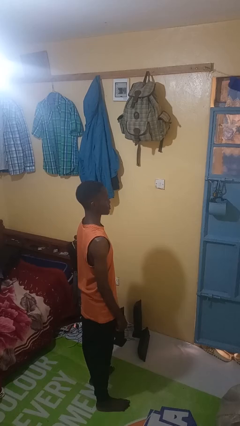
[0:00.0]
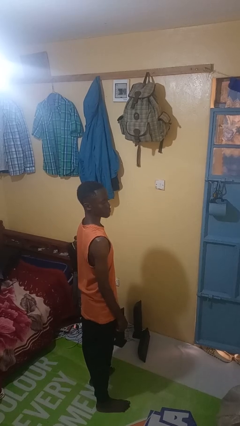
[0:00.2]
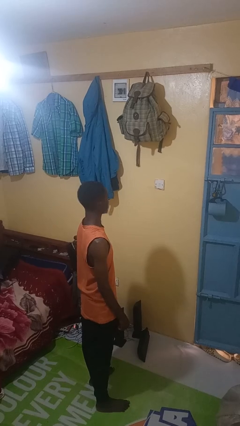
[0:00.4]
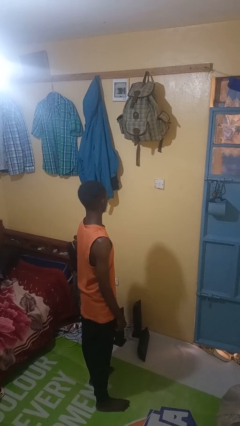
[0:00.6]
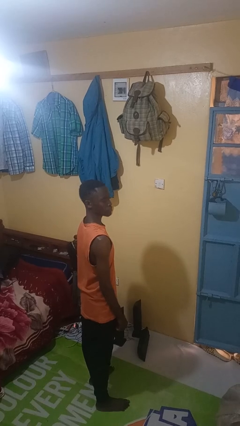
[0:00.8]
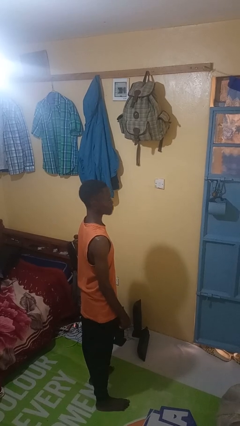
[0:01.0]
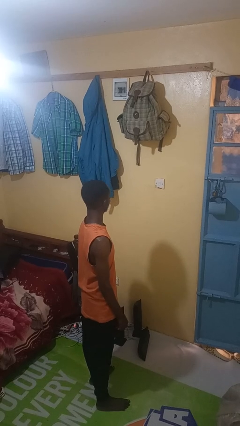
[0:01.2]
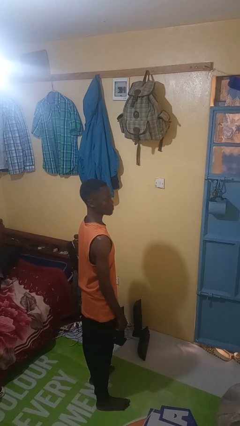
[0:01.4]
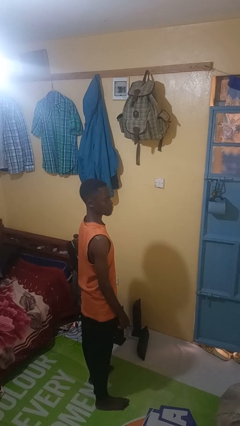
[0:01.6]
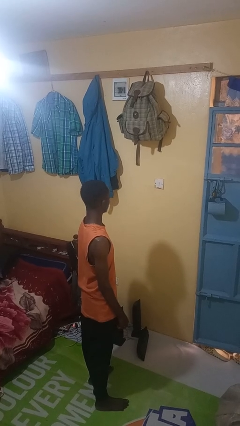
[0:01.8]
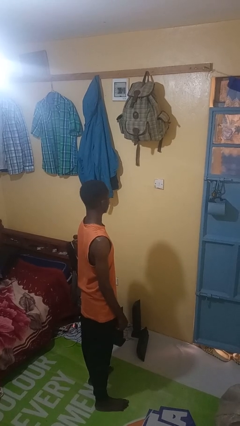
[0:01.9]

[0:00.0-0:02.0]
person shakes head

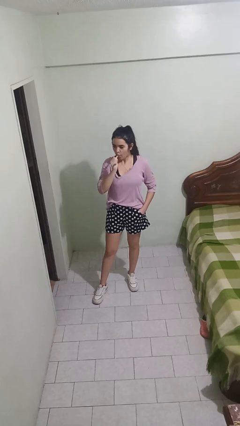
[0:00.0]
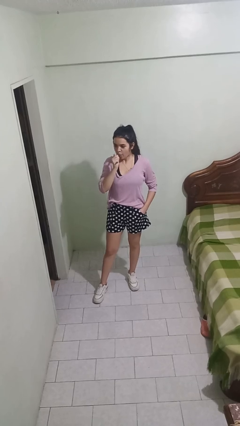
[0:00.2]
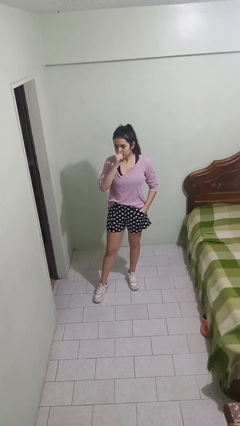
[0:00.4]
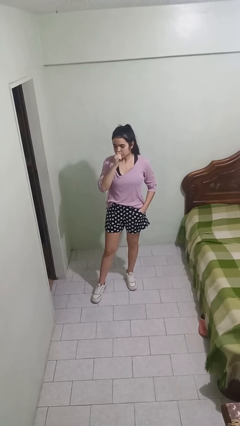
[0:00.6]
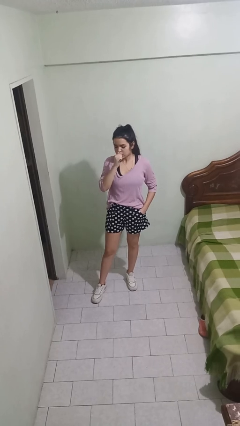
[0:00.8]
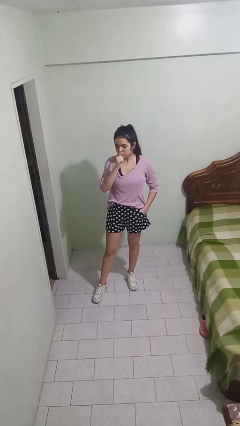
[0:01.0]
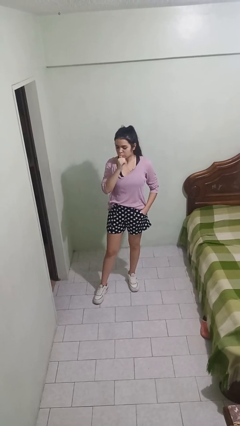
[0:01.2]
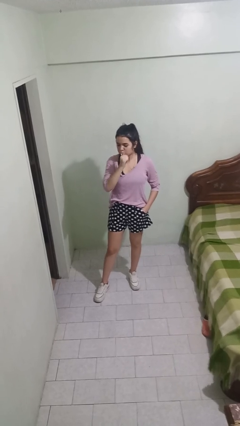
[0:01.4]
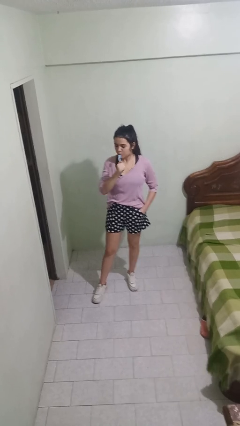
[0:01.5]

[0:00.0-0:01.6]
person brushes teeth

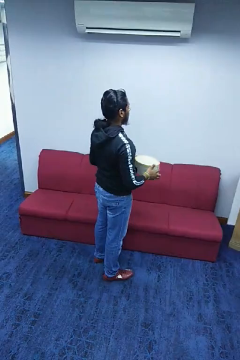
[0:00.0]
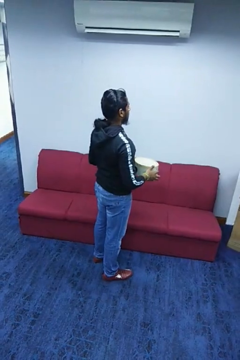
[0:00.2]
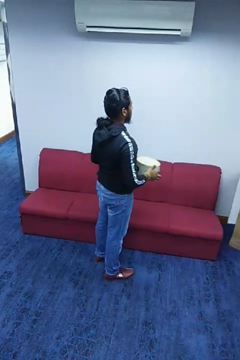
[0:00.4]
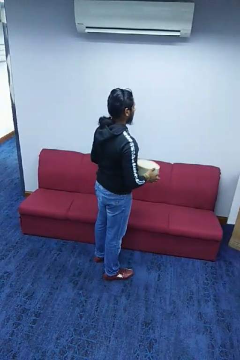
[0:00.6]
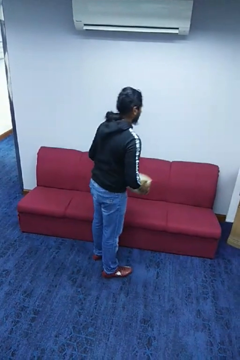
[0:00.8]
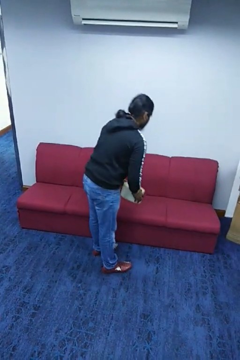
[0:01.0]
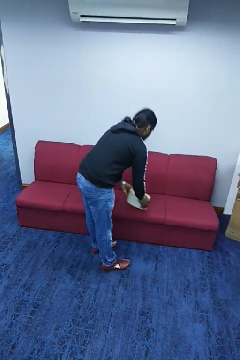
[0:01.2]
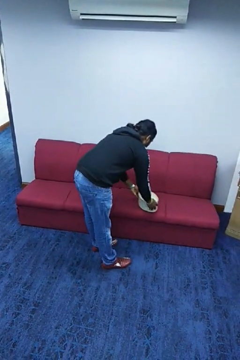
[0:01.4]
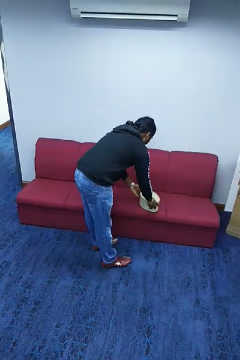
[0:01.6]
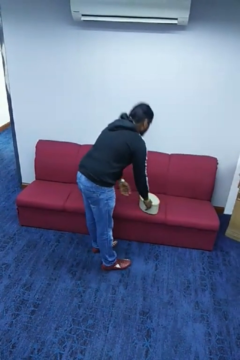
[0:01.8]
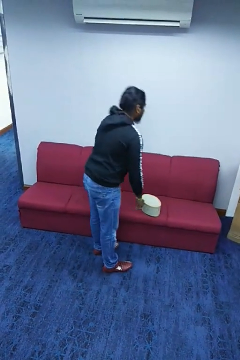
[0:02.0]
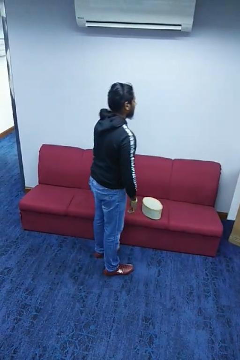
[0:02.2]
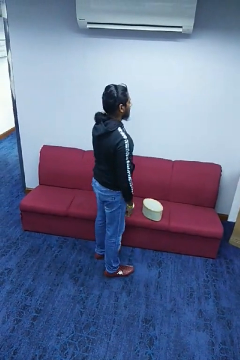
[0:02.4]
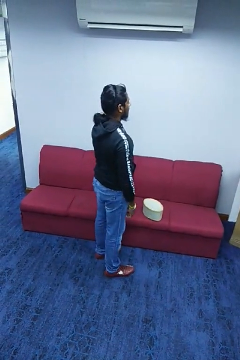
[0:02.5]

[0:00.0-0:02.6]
person puts down object on couch

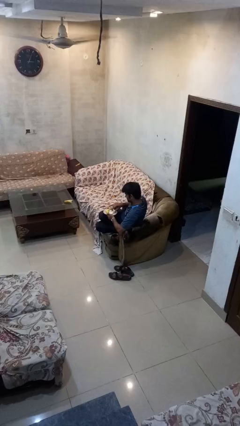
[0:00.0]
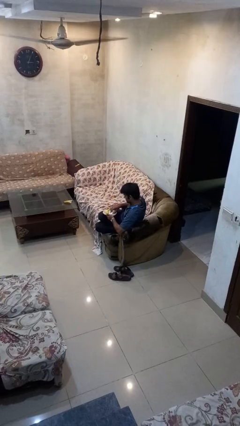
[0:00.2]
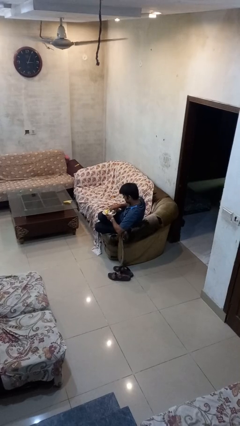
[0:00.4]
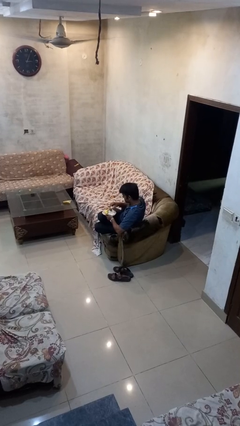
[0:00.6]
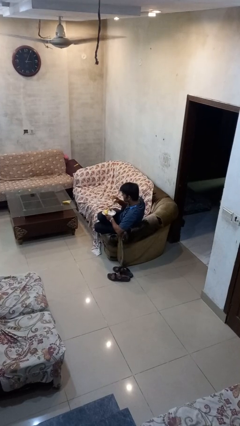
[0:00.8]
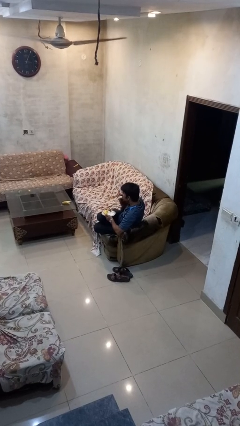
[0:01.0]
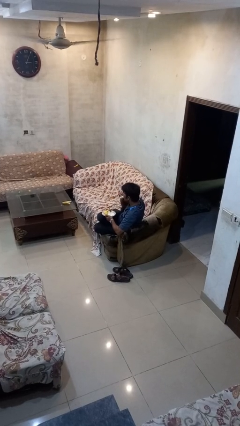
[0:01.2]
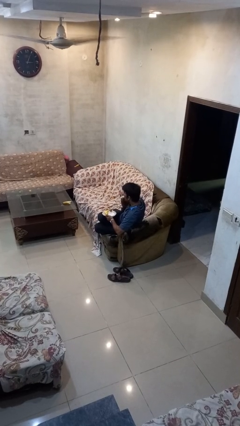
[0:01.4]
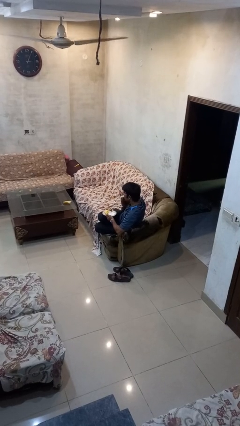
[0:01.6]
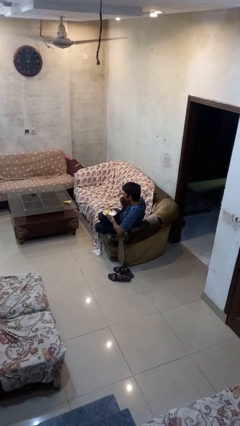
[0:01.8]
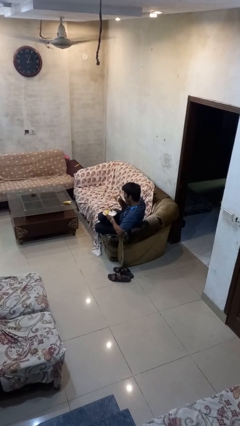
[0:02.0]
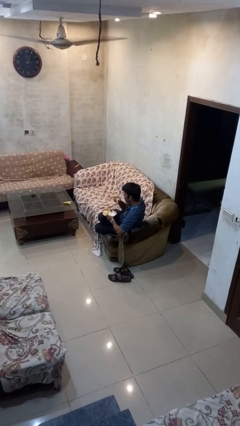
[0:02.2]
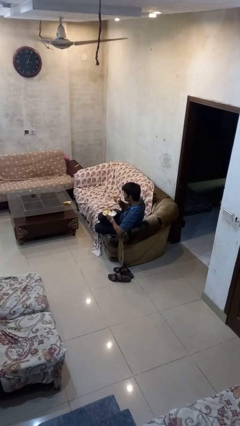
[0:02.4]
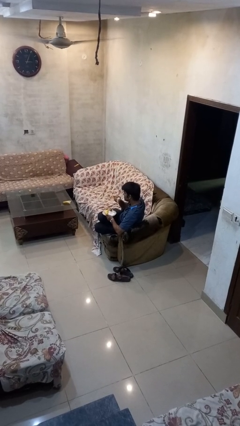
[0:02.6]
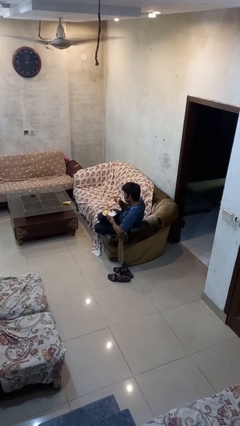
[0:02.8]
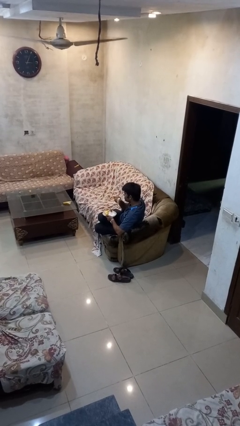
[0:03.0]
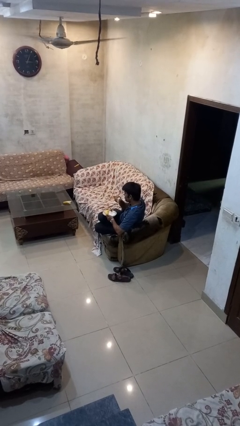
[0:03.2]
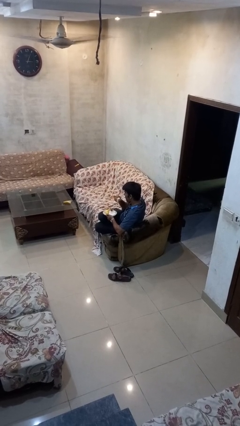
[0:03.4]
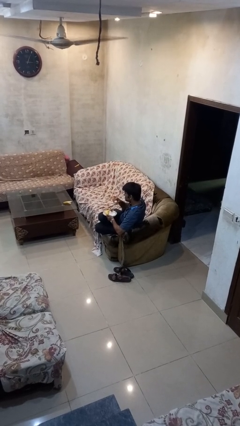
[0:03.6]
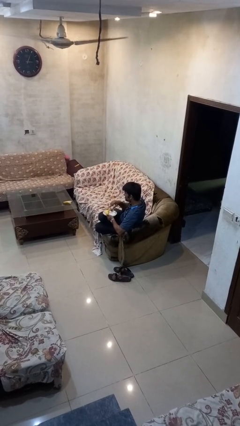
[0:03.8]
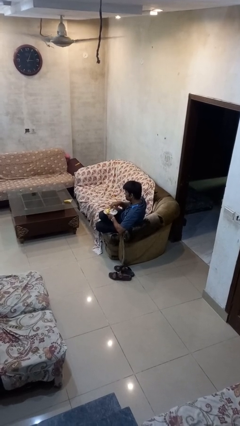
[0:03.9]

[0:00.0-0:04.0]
person eats with hands

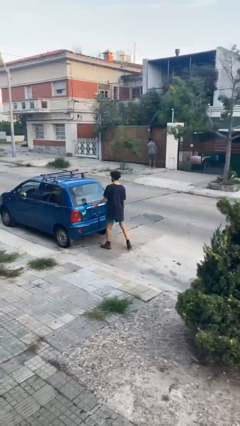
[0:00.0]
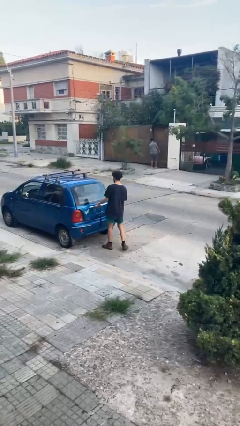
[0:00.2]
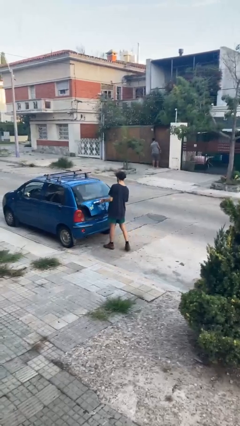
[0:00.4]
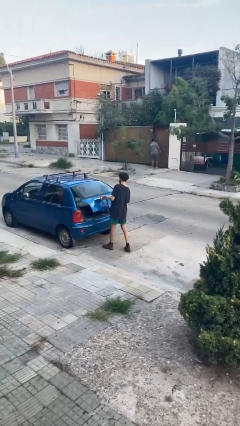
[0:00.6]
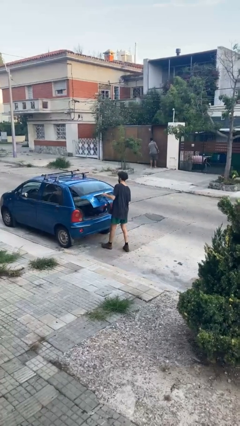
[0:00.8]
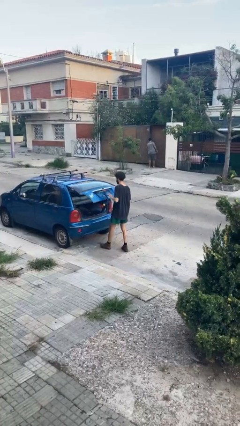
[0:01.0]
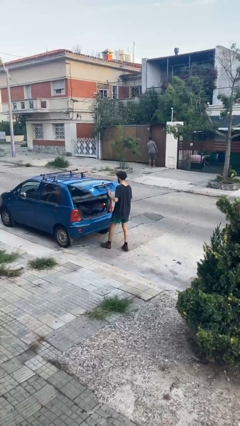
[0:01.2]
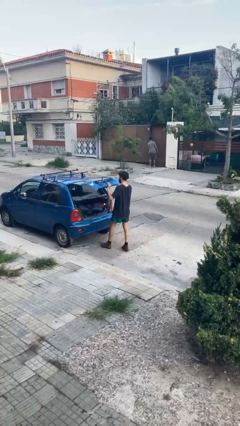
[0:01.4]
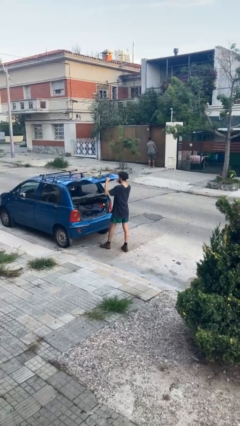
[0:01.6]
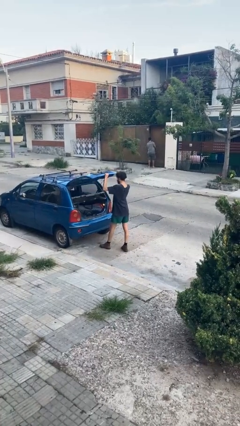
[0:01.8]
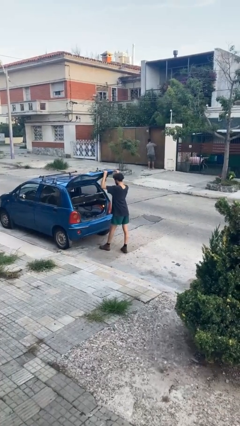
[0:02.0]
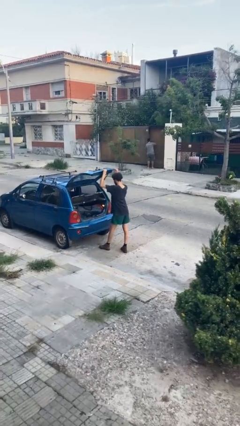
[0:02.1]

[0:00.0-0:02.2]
person opens car trunk

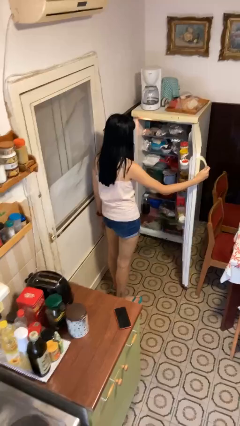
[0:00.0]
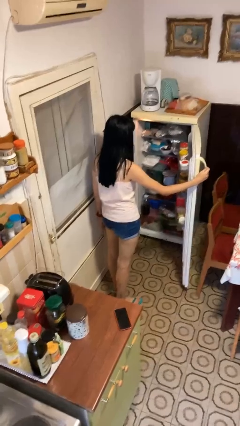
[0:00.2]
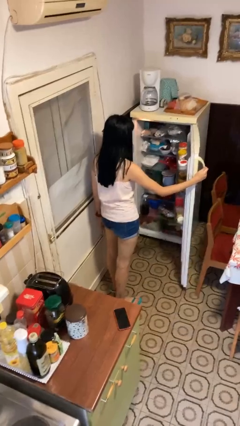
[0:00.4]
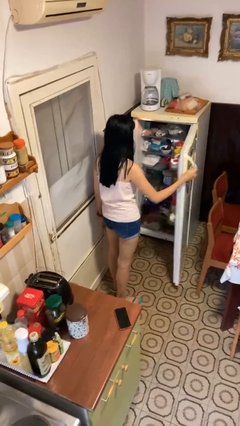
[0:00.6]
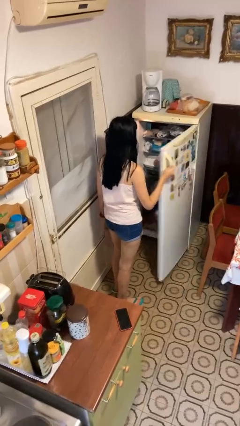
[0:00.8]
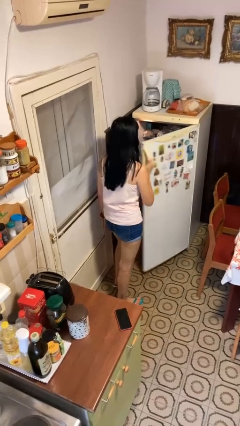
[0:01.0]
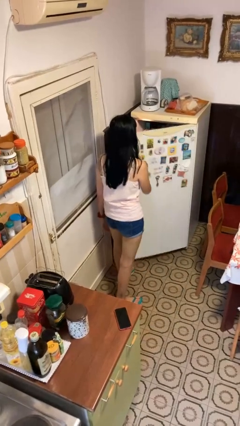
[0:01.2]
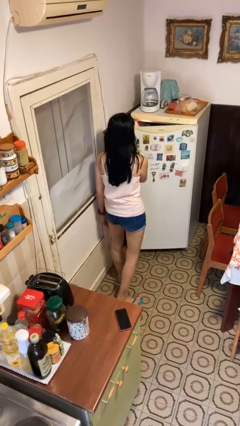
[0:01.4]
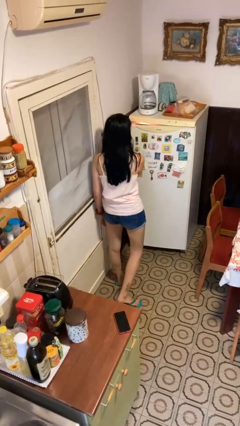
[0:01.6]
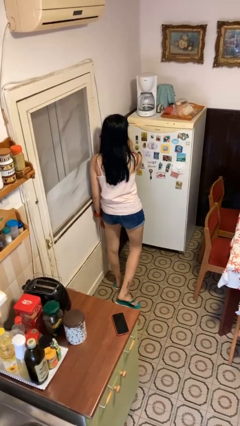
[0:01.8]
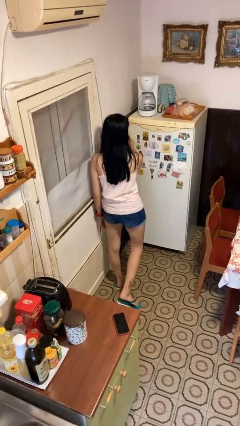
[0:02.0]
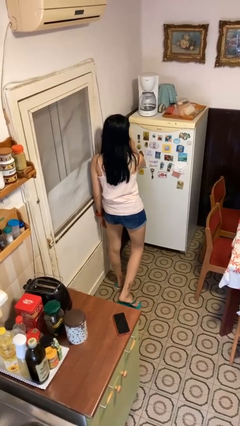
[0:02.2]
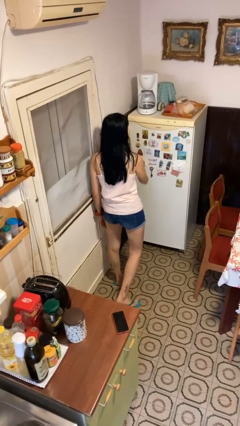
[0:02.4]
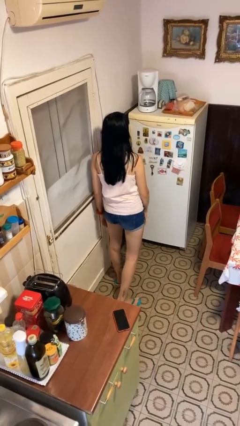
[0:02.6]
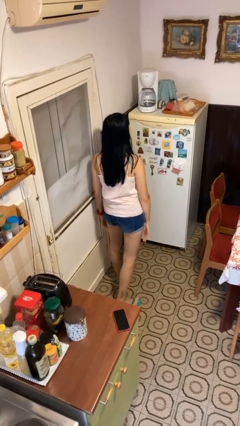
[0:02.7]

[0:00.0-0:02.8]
person closes refrigerator

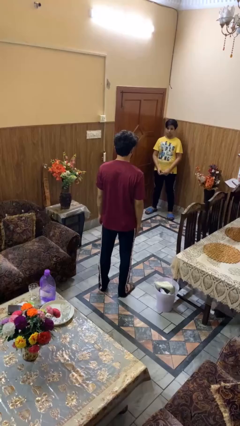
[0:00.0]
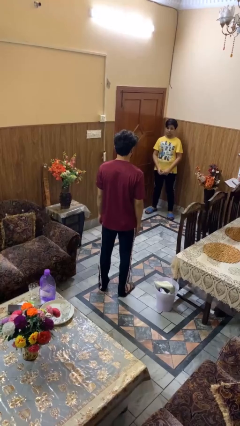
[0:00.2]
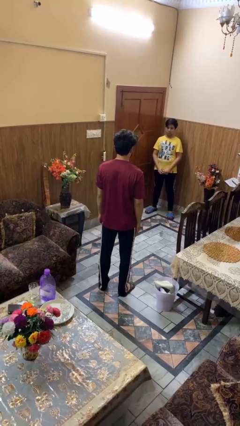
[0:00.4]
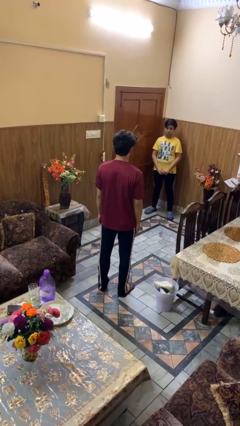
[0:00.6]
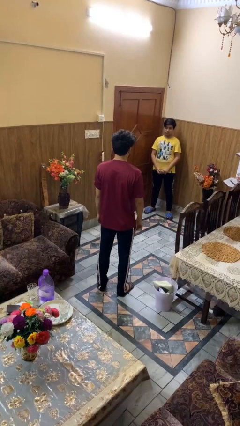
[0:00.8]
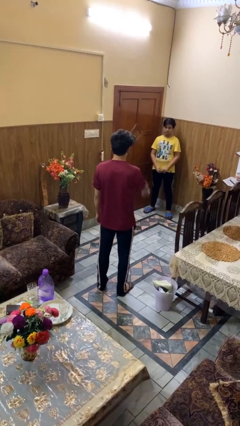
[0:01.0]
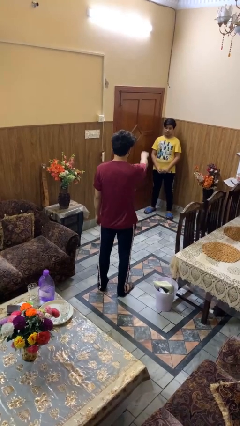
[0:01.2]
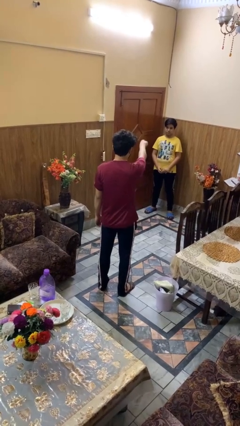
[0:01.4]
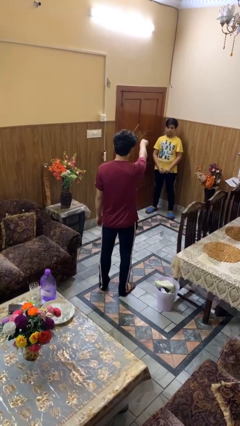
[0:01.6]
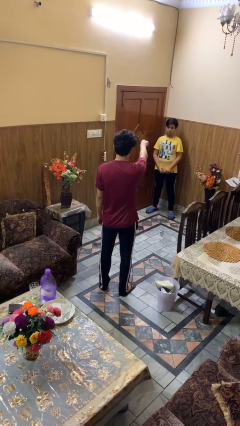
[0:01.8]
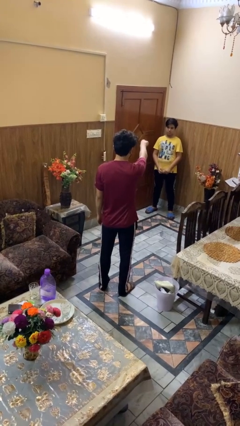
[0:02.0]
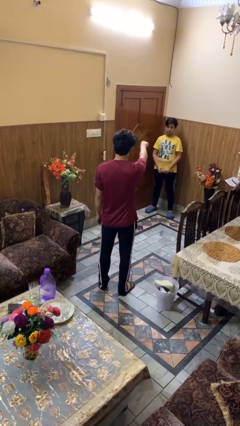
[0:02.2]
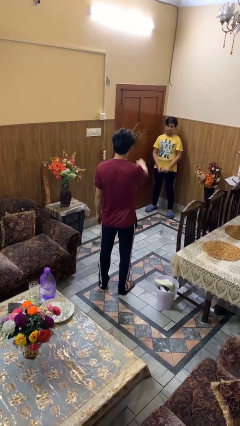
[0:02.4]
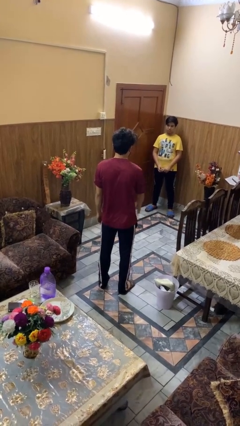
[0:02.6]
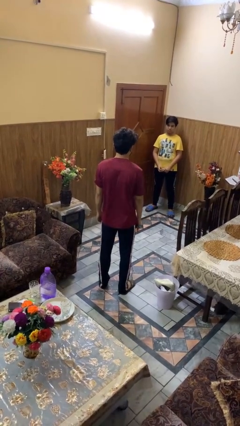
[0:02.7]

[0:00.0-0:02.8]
person points at person
